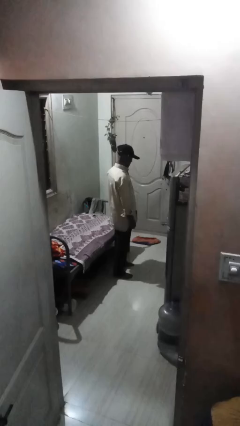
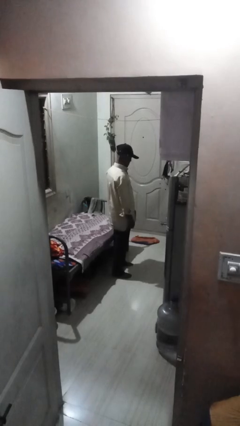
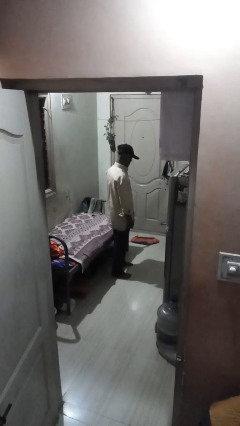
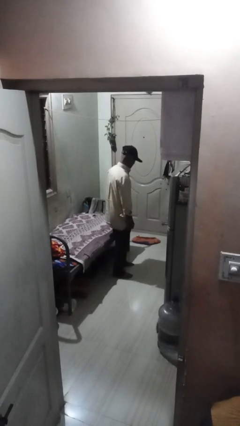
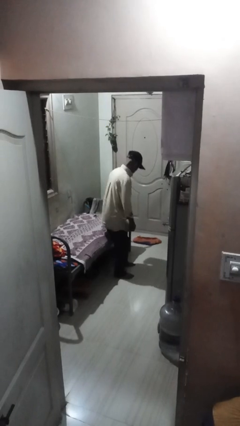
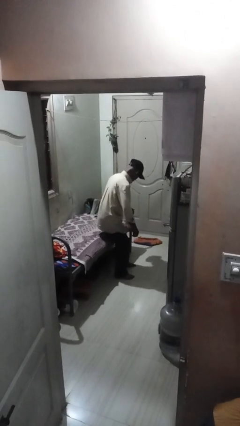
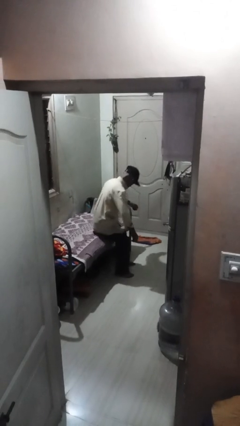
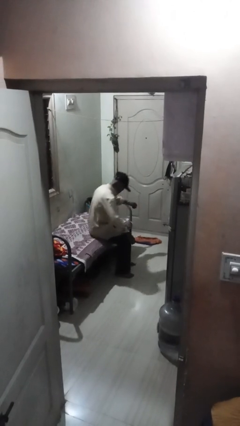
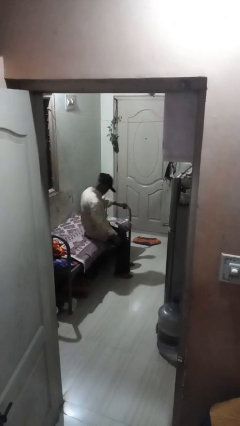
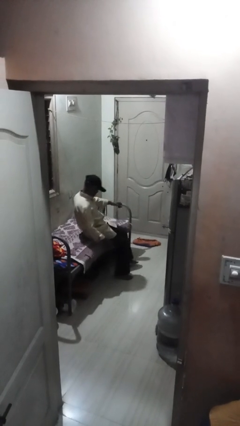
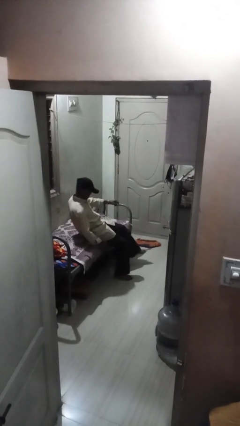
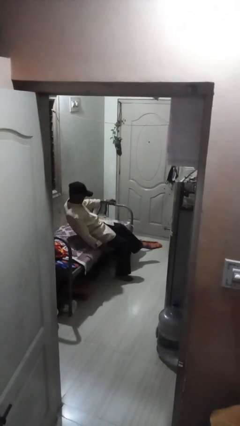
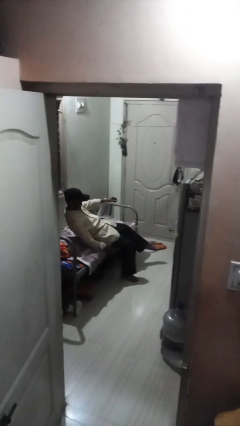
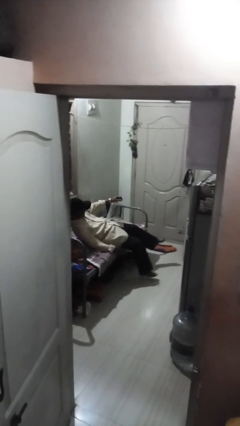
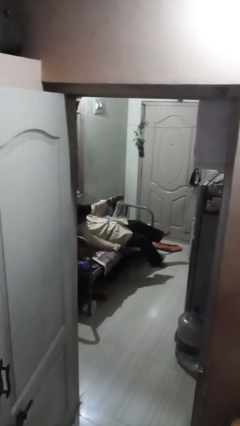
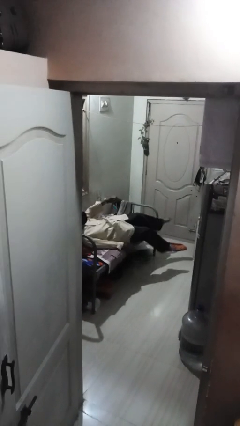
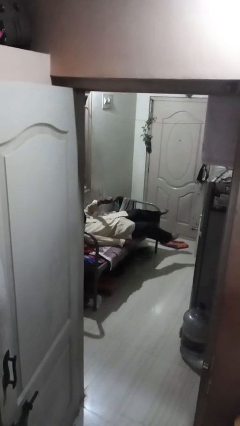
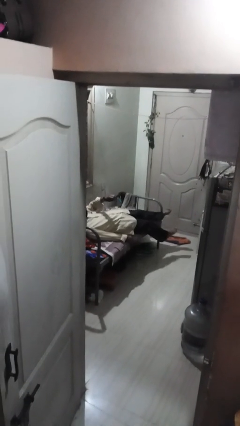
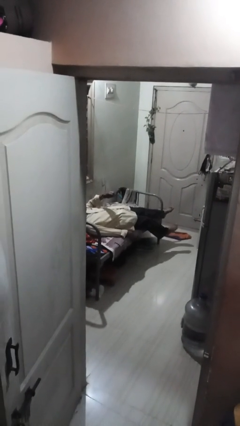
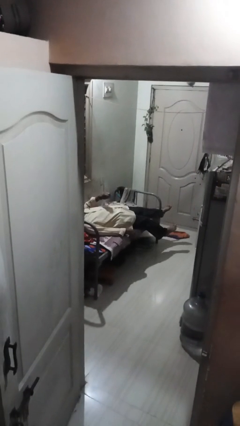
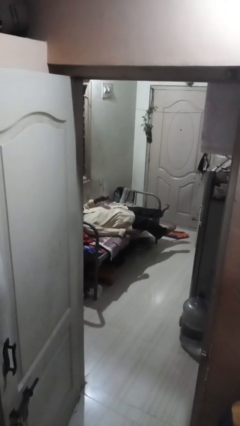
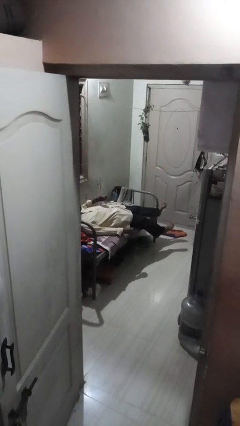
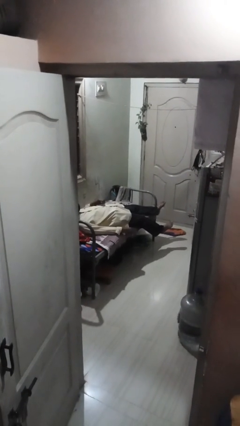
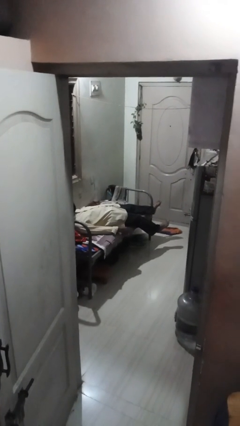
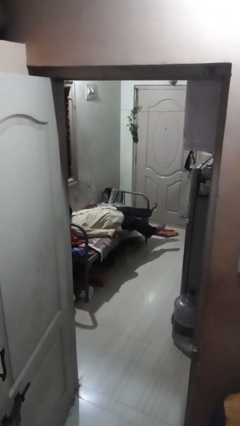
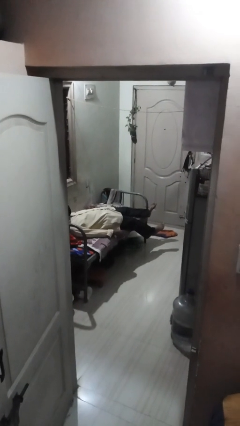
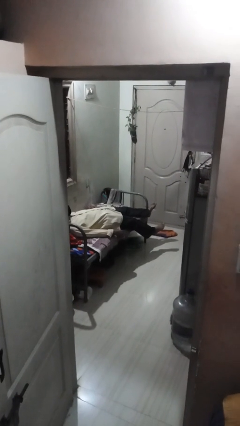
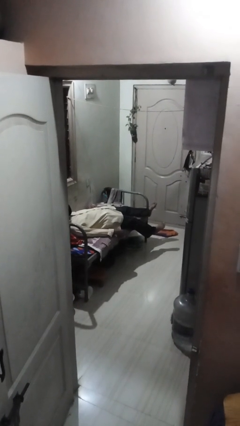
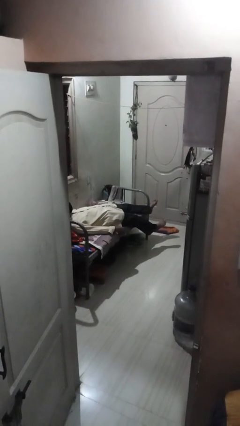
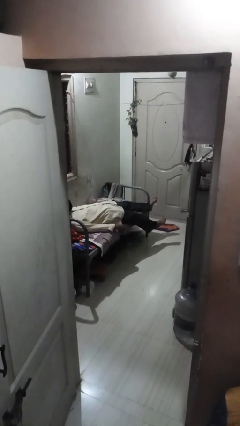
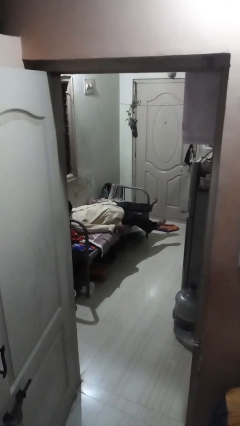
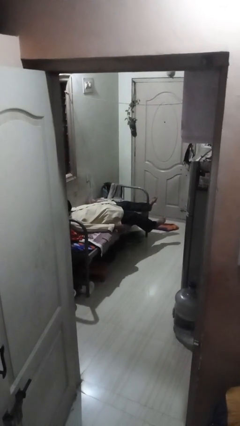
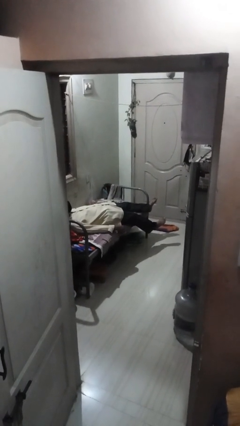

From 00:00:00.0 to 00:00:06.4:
person lies down on bed

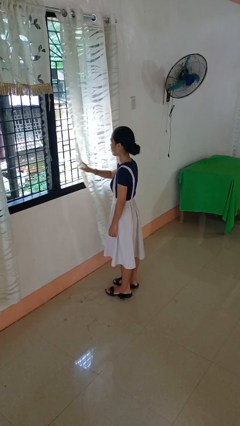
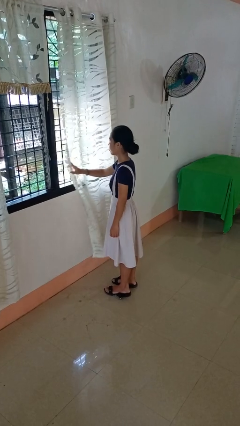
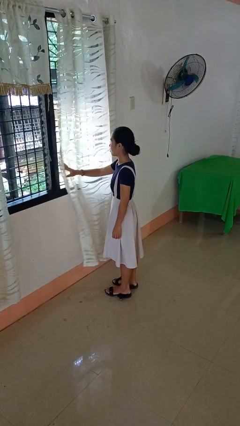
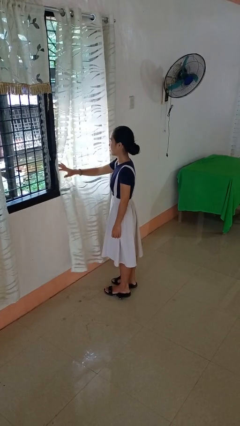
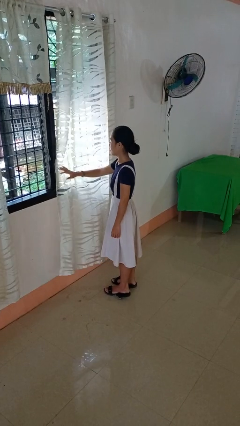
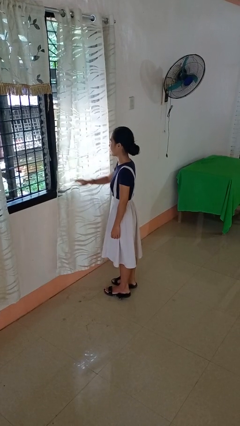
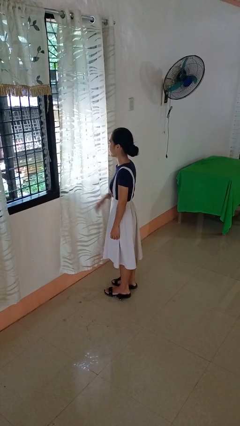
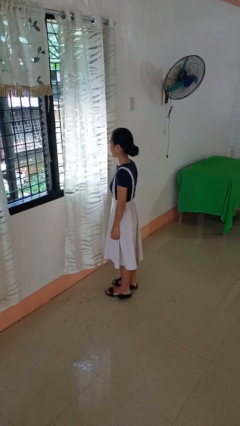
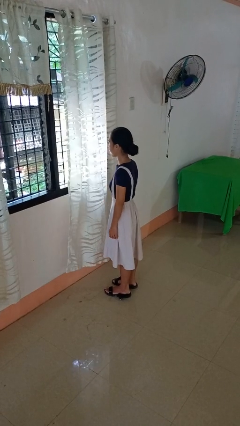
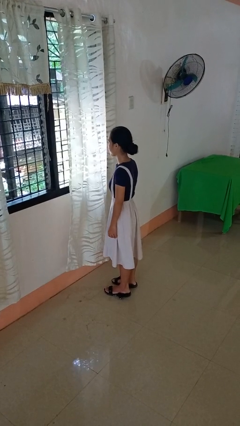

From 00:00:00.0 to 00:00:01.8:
person closes curtains

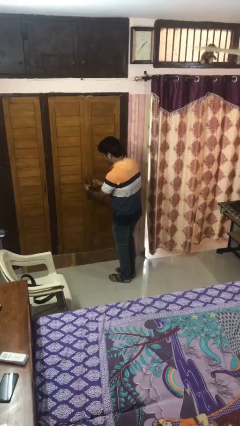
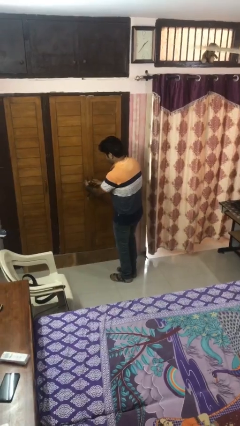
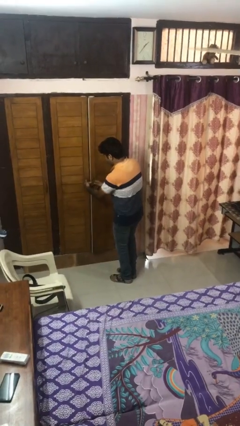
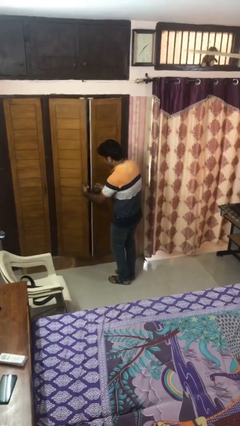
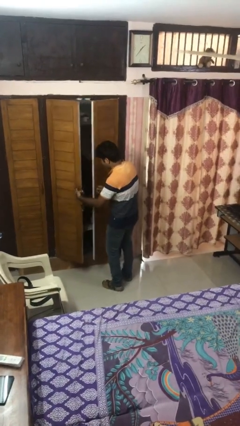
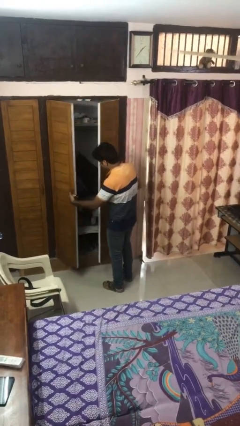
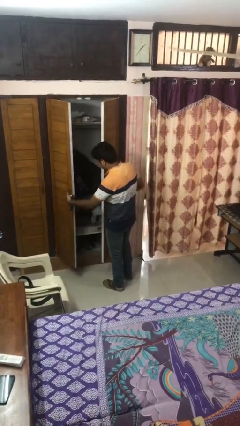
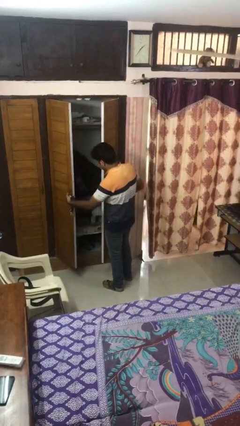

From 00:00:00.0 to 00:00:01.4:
person opens facility door

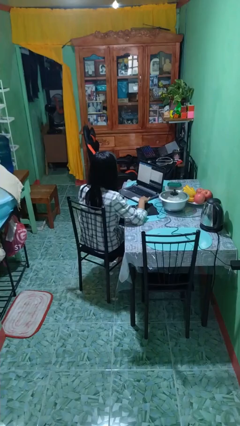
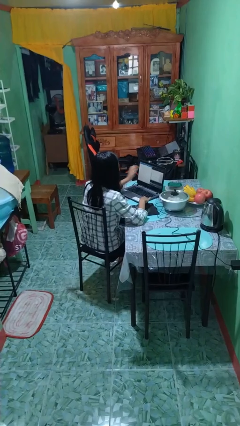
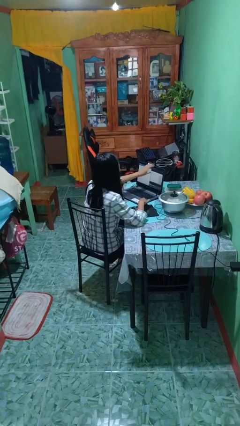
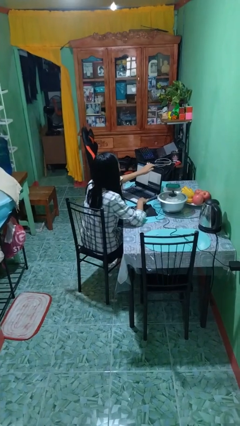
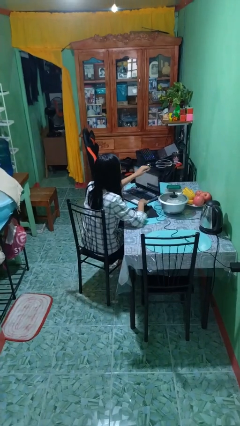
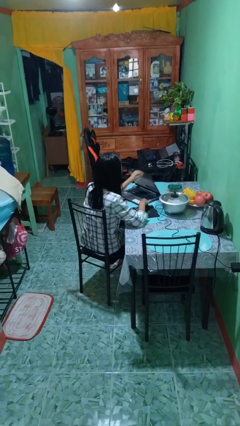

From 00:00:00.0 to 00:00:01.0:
person closes laptop

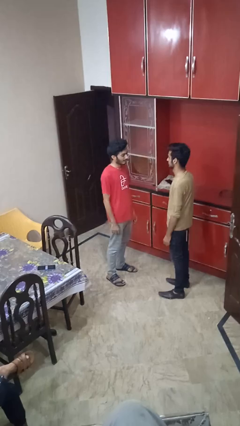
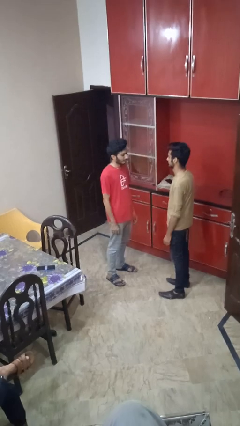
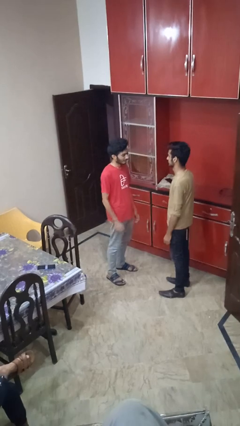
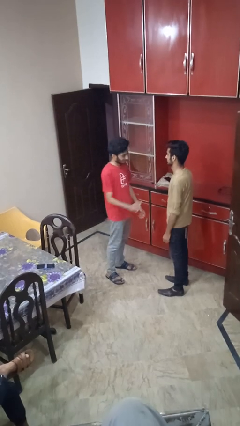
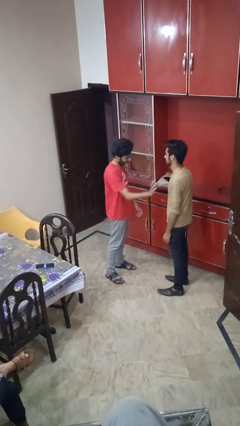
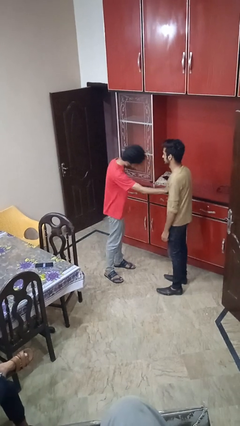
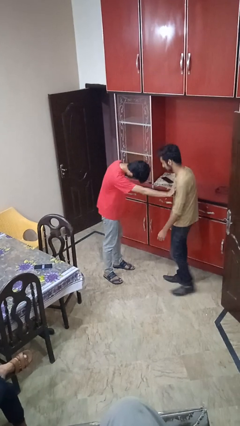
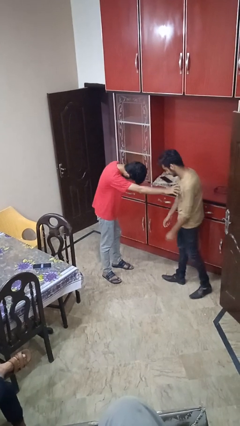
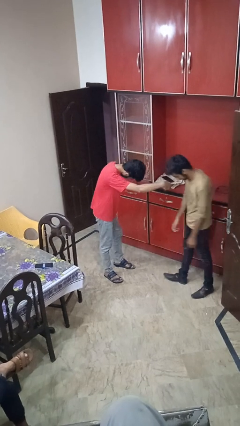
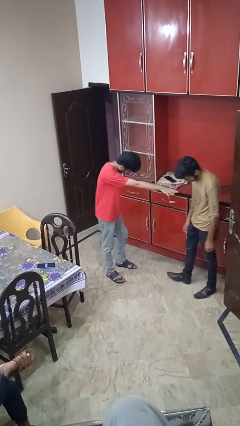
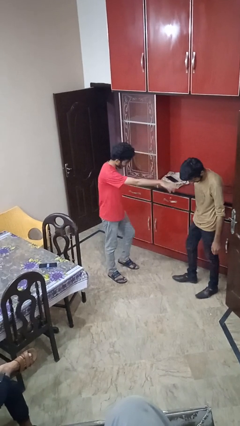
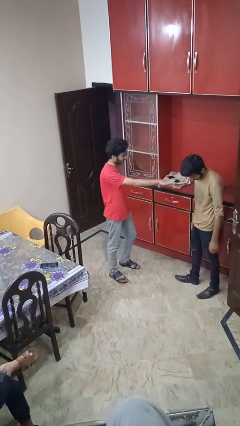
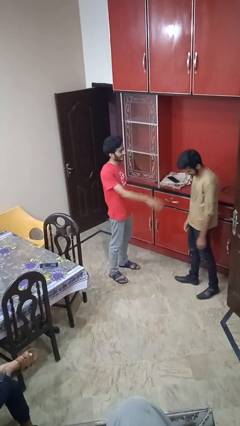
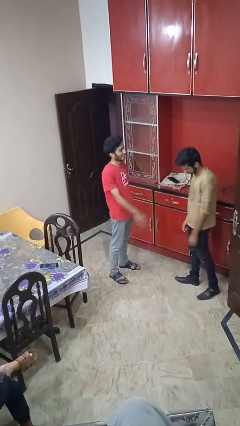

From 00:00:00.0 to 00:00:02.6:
person shoves person

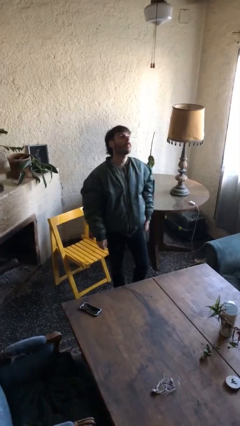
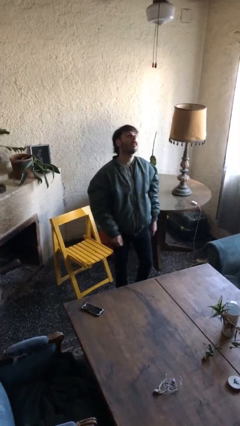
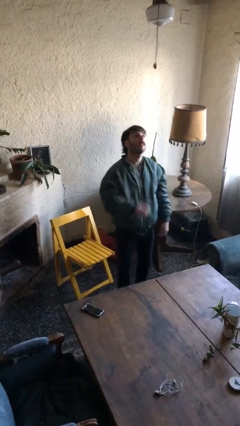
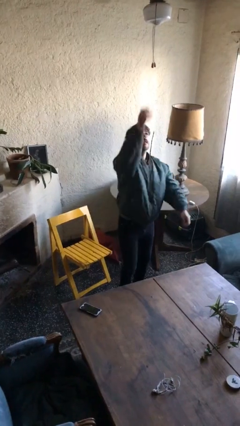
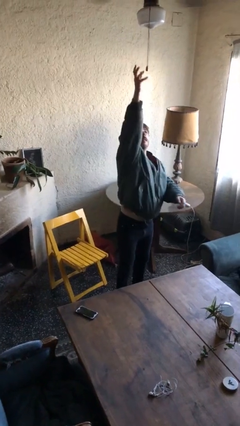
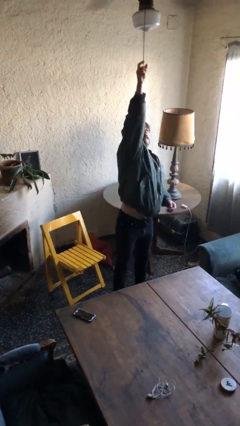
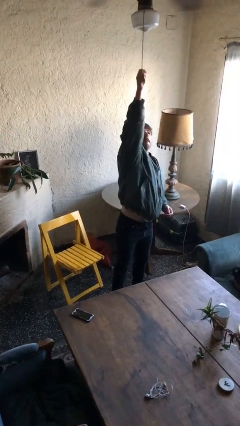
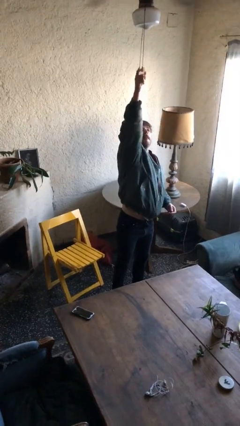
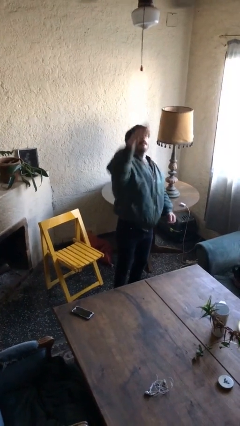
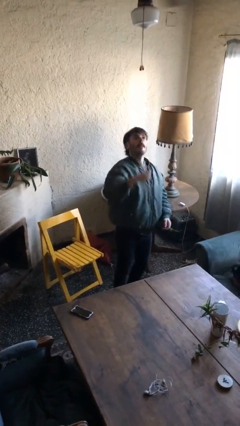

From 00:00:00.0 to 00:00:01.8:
person turns on fan

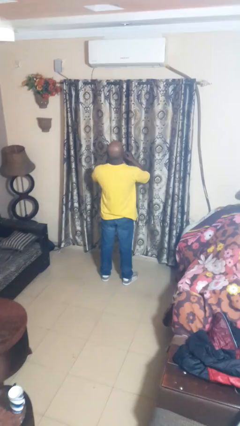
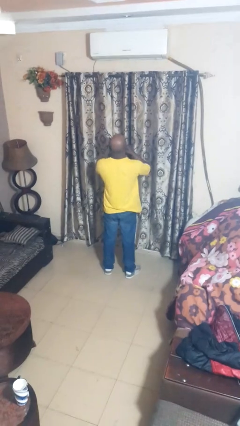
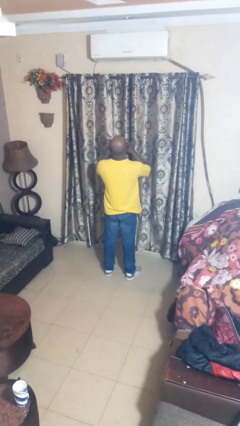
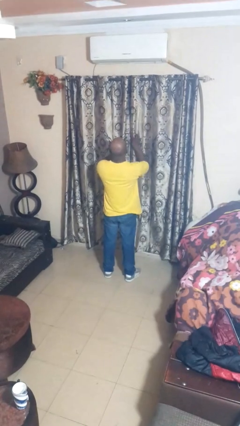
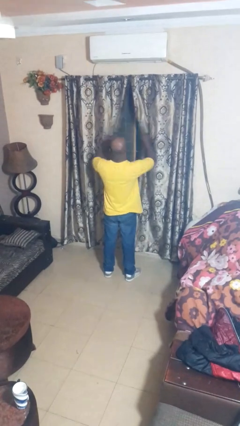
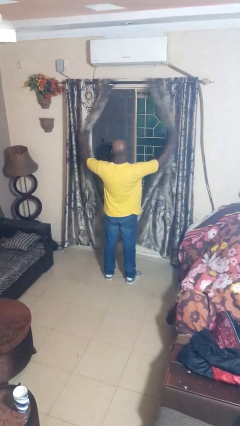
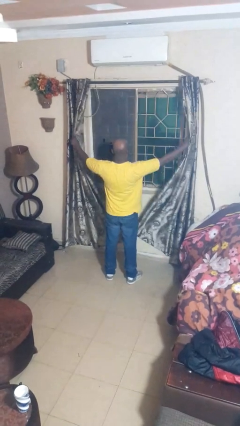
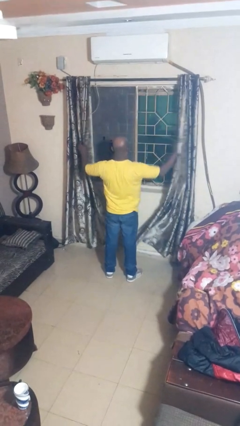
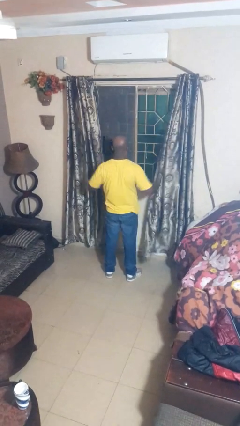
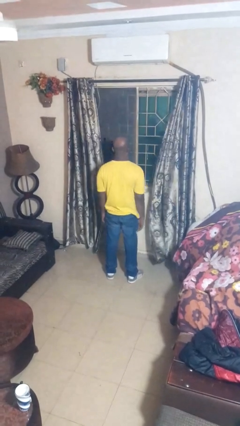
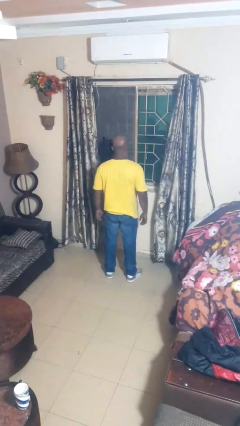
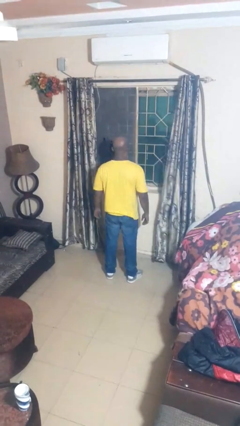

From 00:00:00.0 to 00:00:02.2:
person opens curtains
